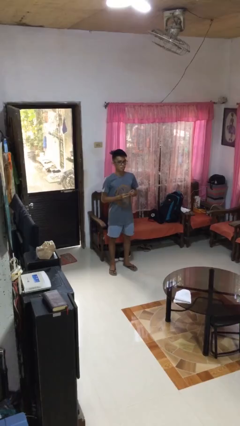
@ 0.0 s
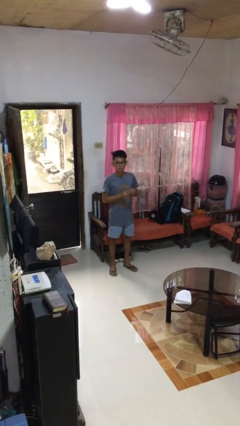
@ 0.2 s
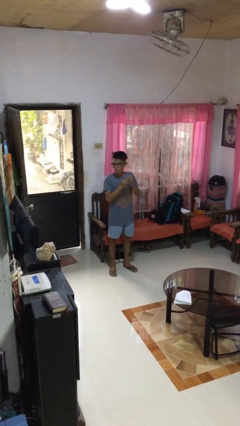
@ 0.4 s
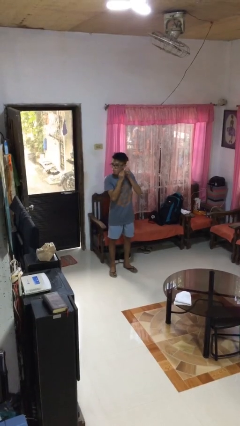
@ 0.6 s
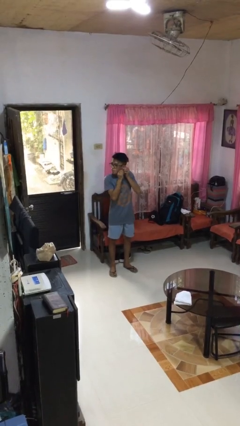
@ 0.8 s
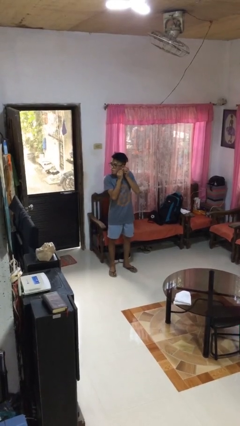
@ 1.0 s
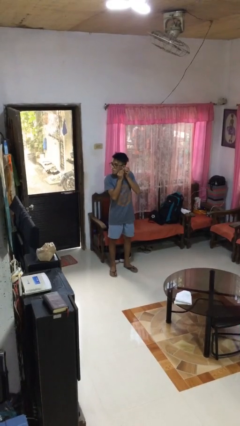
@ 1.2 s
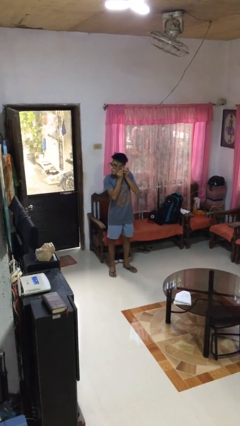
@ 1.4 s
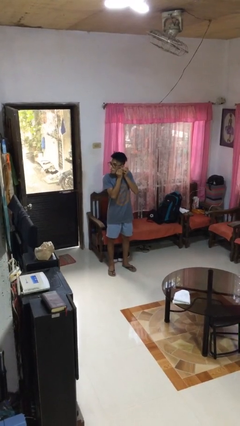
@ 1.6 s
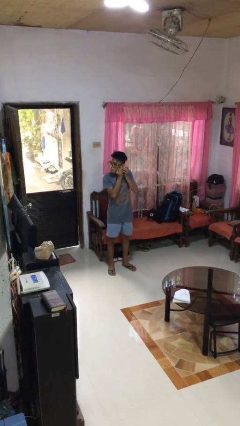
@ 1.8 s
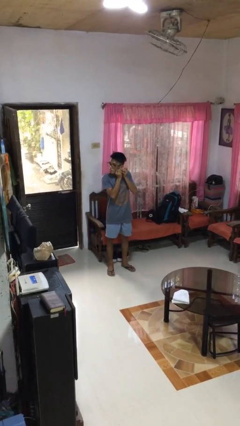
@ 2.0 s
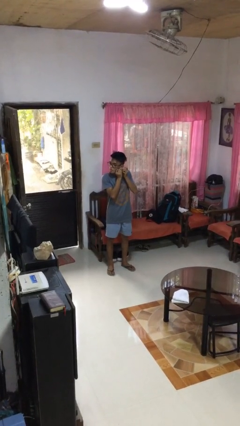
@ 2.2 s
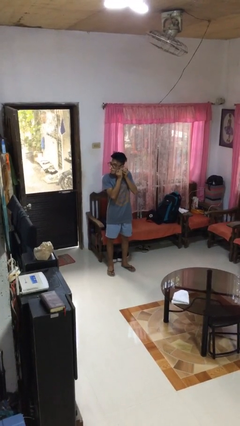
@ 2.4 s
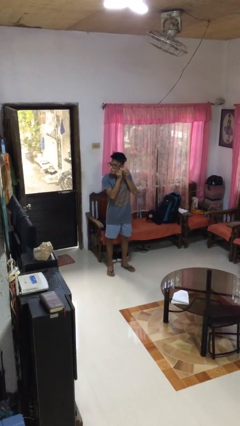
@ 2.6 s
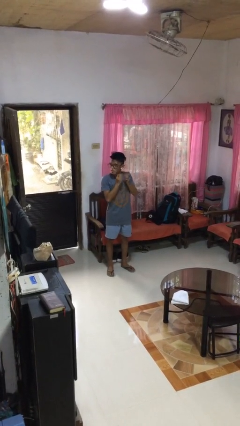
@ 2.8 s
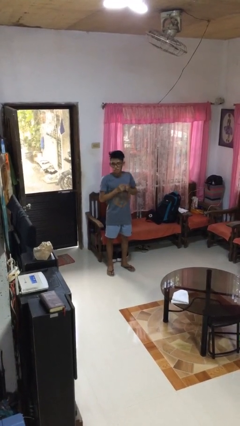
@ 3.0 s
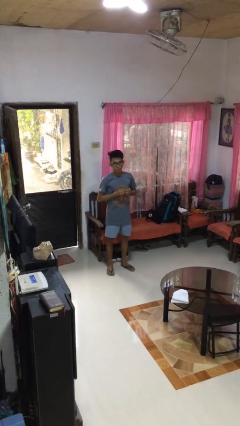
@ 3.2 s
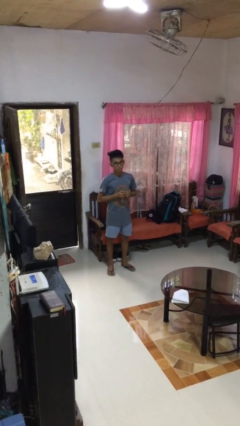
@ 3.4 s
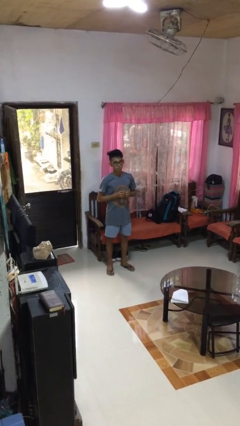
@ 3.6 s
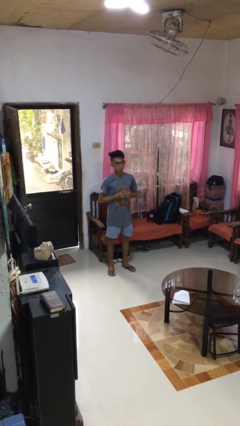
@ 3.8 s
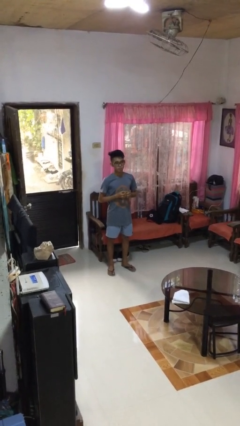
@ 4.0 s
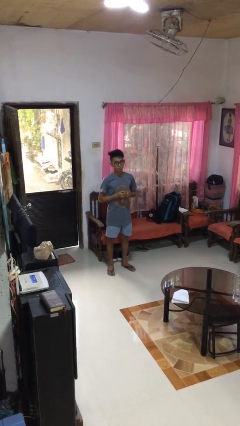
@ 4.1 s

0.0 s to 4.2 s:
person puts on earrings

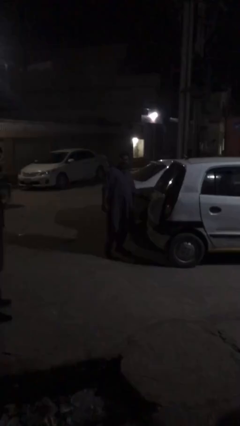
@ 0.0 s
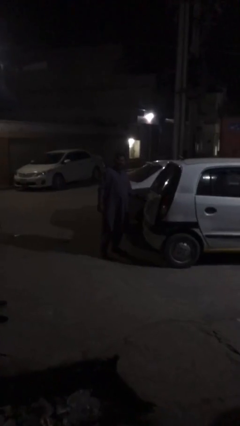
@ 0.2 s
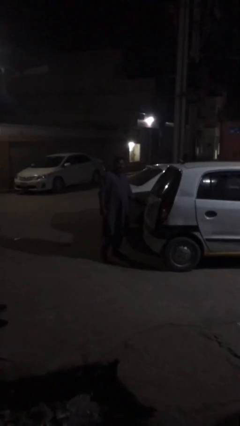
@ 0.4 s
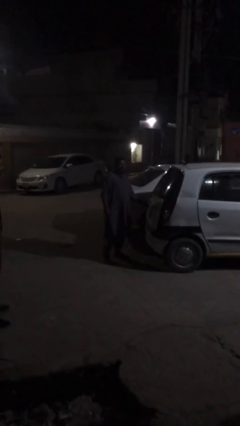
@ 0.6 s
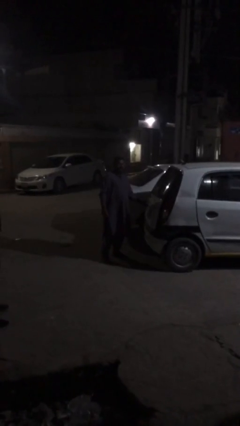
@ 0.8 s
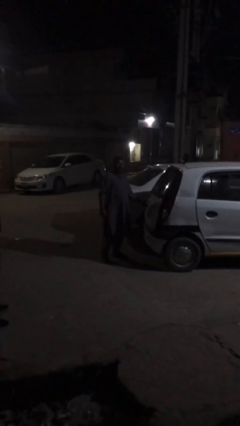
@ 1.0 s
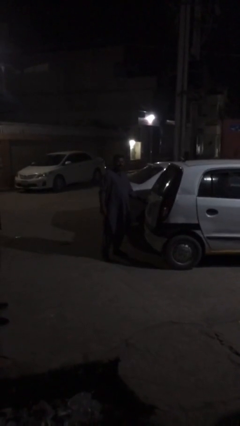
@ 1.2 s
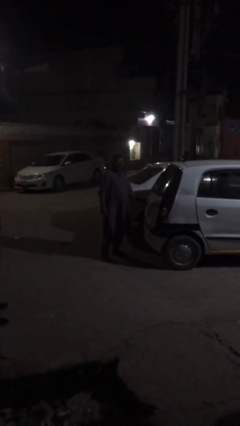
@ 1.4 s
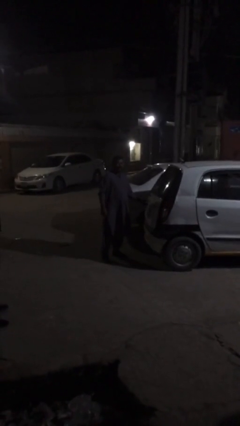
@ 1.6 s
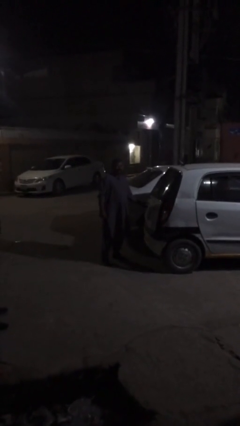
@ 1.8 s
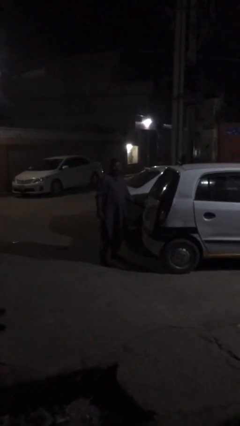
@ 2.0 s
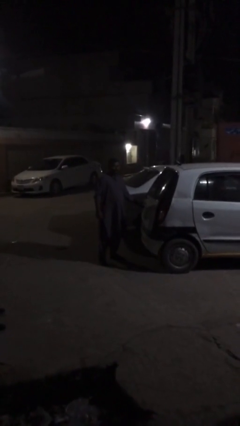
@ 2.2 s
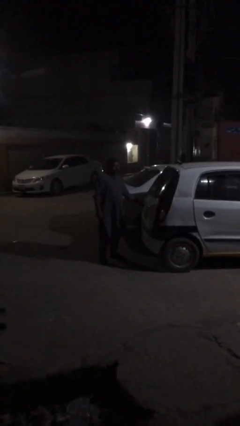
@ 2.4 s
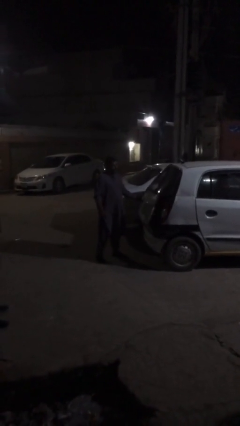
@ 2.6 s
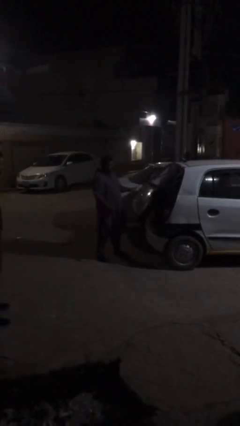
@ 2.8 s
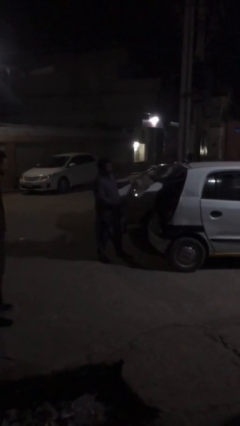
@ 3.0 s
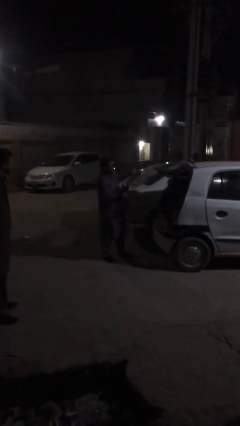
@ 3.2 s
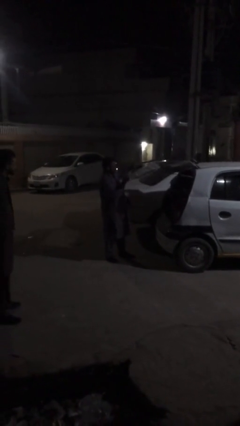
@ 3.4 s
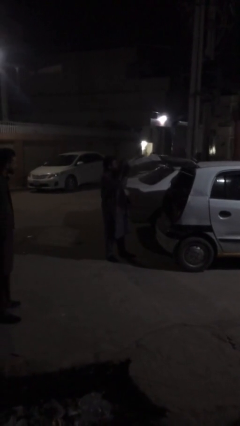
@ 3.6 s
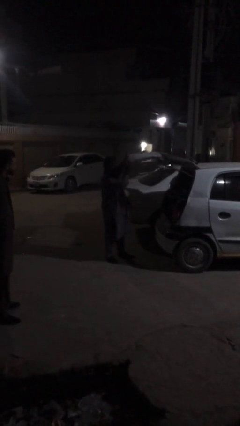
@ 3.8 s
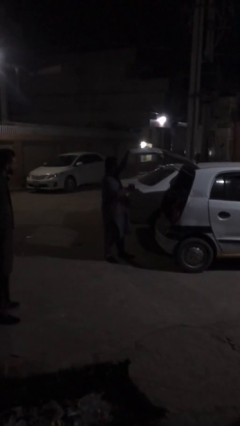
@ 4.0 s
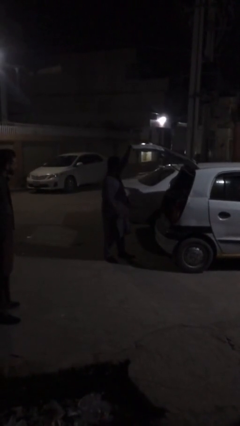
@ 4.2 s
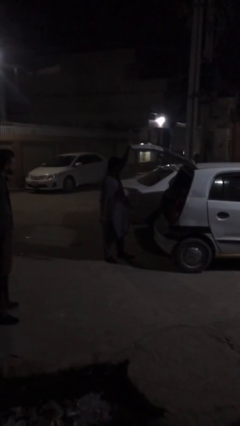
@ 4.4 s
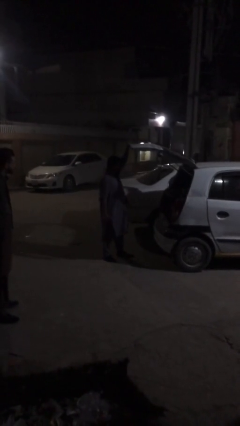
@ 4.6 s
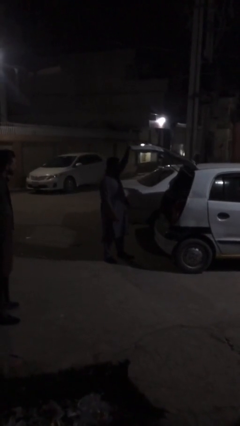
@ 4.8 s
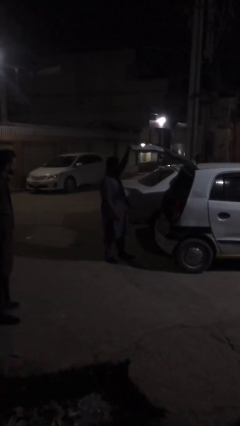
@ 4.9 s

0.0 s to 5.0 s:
person opens car trunk

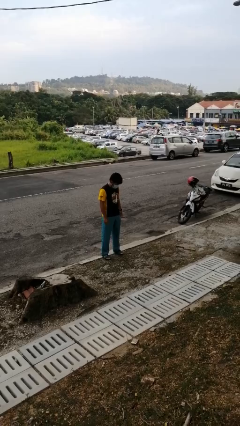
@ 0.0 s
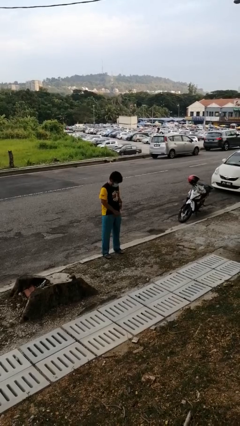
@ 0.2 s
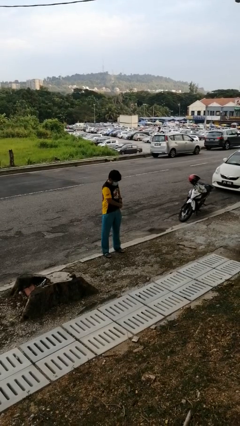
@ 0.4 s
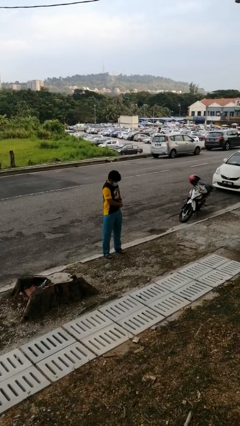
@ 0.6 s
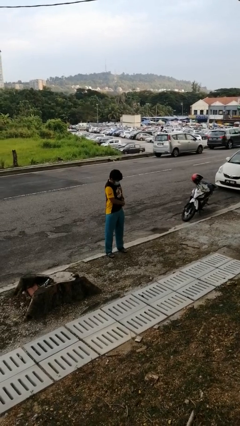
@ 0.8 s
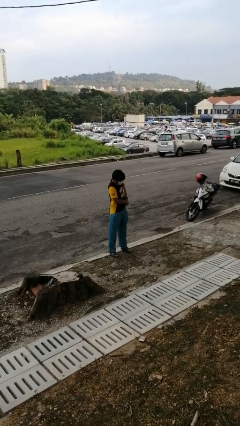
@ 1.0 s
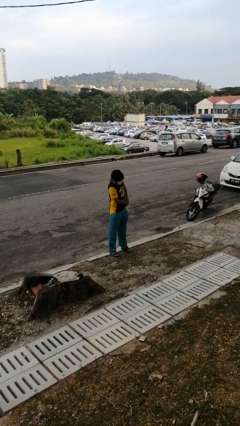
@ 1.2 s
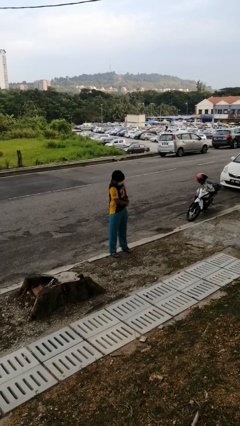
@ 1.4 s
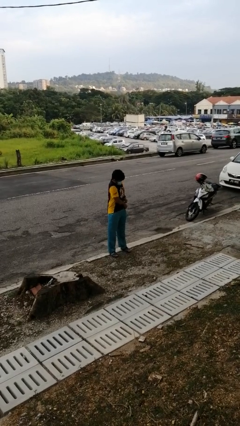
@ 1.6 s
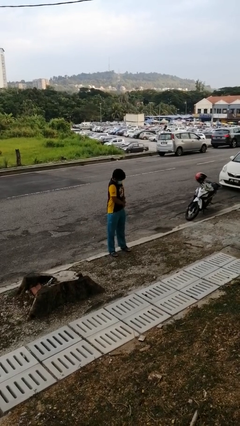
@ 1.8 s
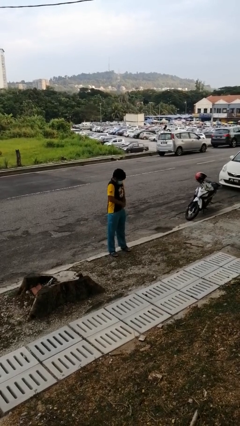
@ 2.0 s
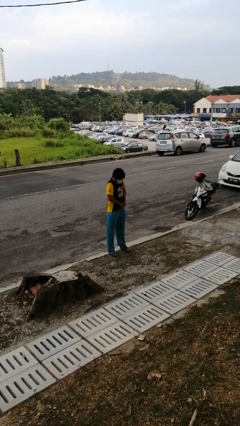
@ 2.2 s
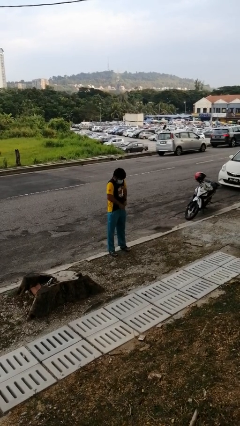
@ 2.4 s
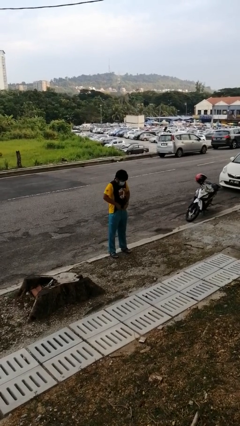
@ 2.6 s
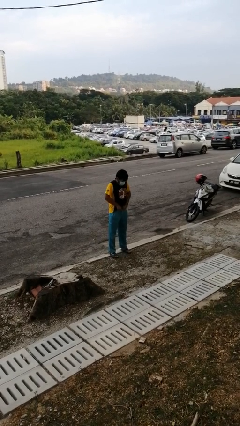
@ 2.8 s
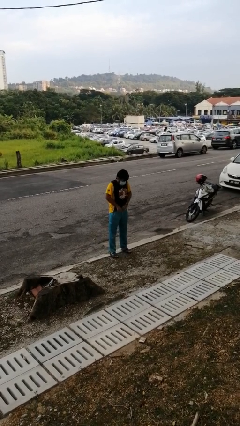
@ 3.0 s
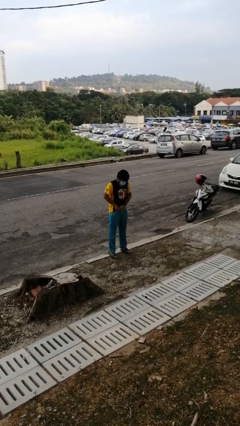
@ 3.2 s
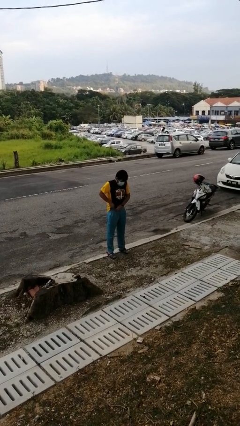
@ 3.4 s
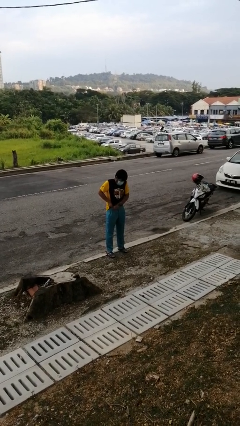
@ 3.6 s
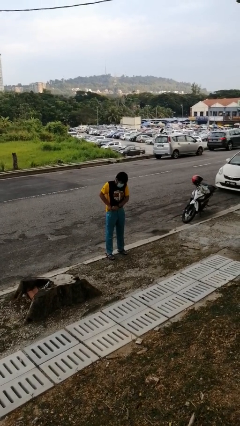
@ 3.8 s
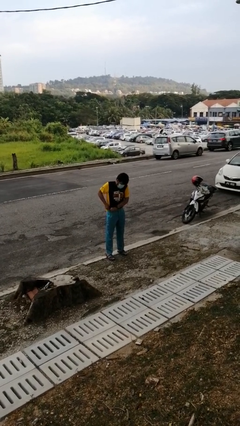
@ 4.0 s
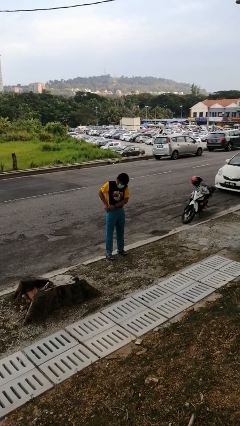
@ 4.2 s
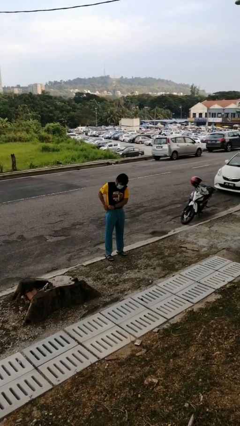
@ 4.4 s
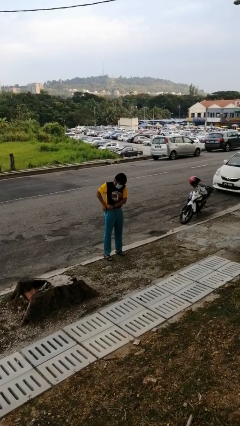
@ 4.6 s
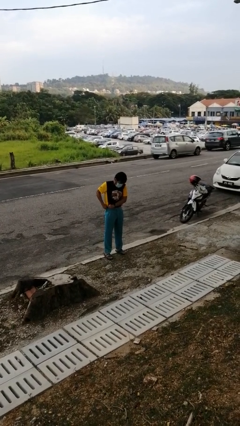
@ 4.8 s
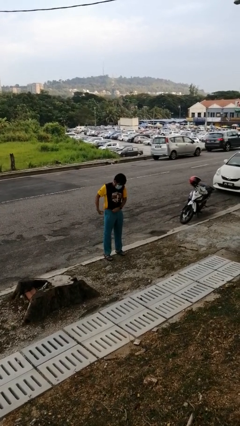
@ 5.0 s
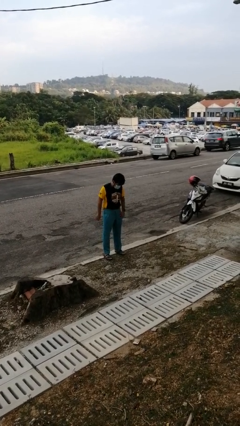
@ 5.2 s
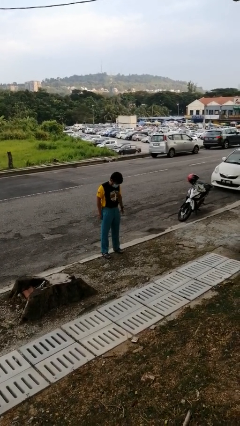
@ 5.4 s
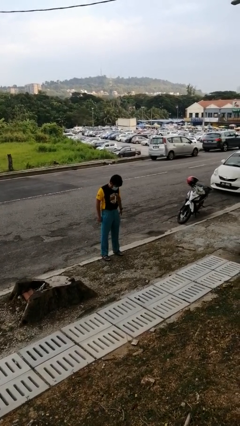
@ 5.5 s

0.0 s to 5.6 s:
person tucks in shirt

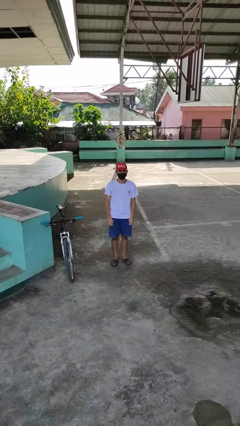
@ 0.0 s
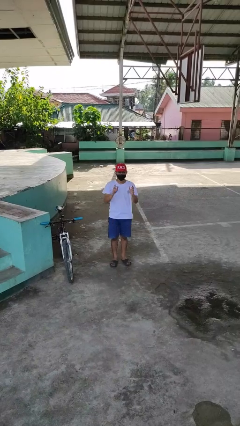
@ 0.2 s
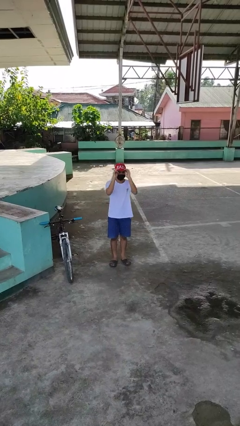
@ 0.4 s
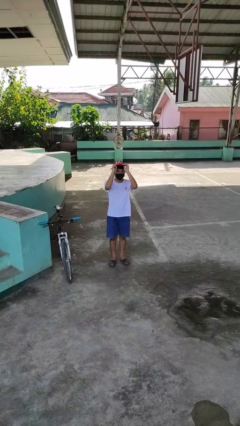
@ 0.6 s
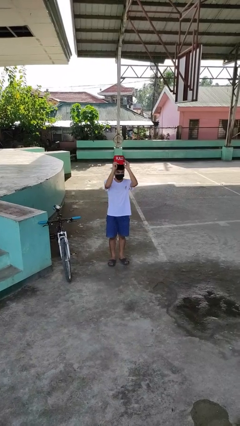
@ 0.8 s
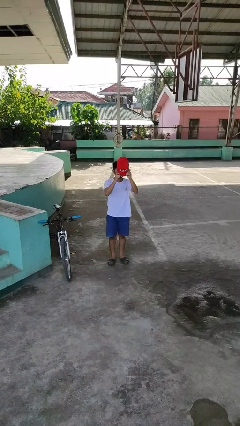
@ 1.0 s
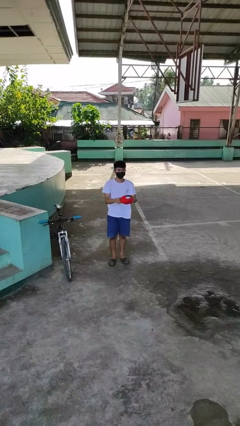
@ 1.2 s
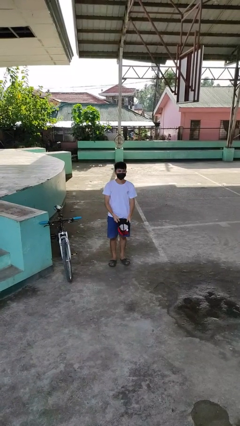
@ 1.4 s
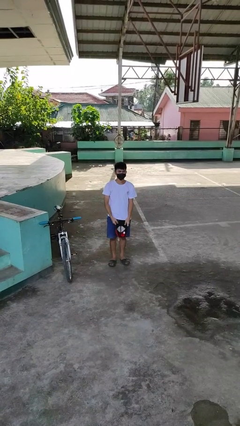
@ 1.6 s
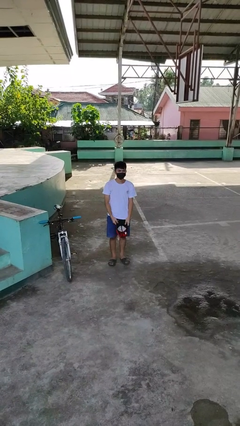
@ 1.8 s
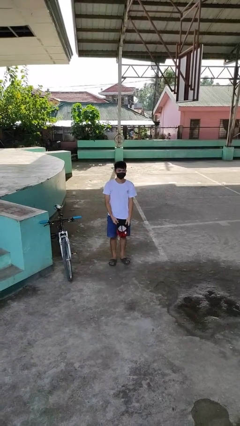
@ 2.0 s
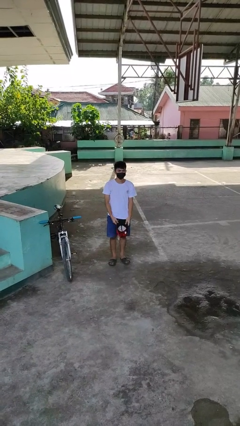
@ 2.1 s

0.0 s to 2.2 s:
person takes off hat

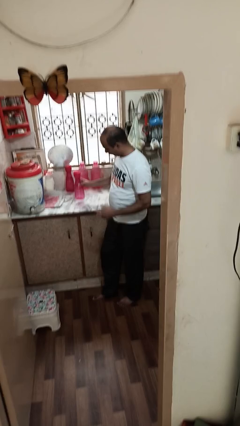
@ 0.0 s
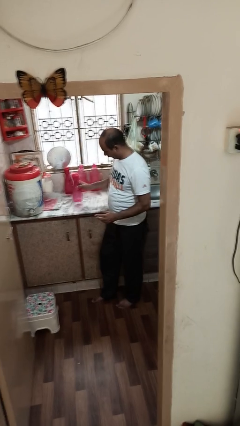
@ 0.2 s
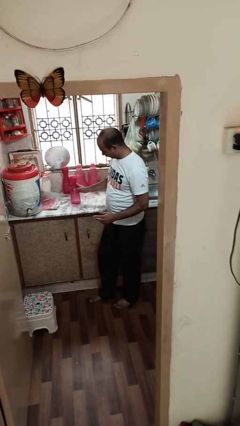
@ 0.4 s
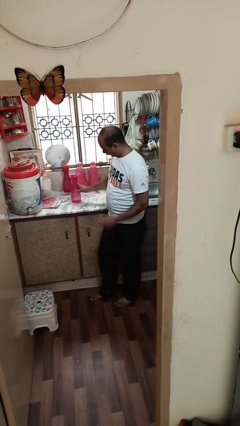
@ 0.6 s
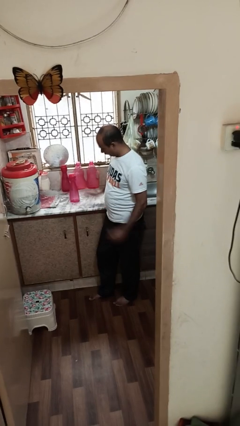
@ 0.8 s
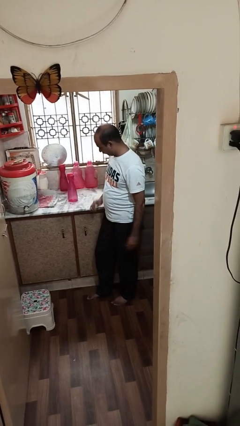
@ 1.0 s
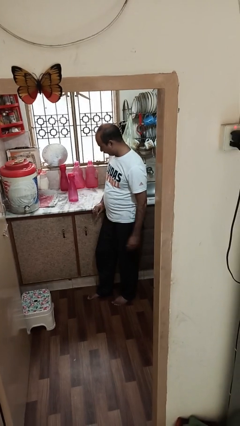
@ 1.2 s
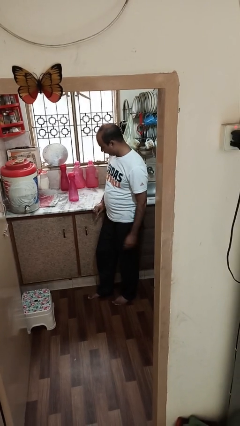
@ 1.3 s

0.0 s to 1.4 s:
person puts down object on countertop
